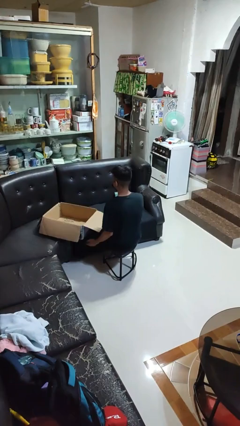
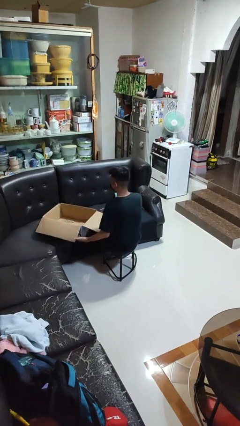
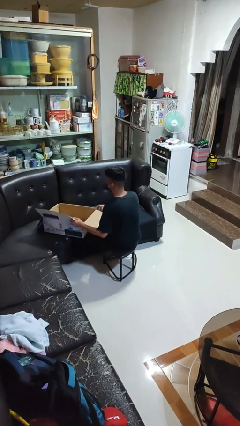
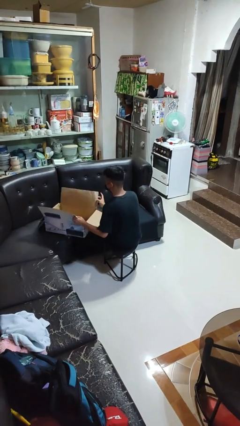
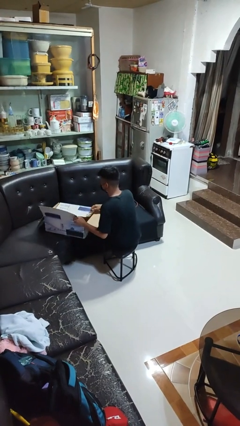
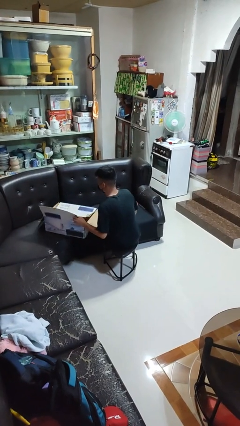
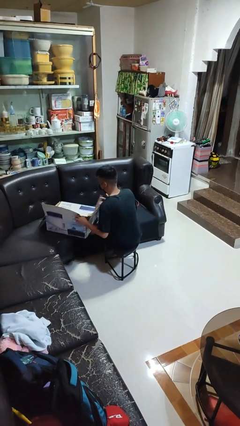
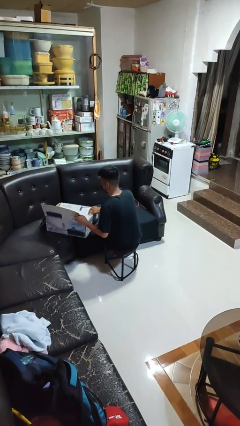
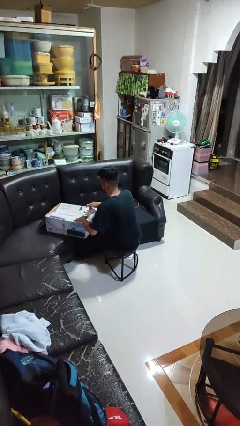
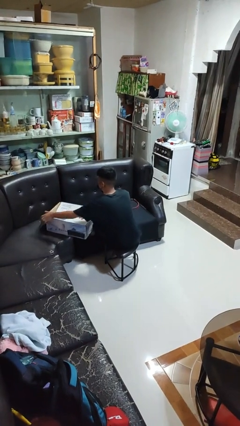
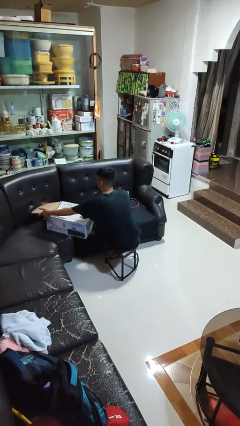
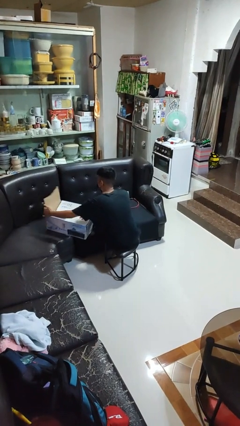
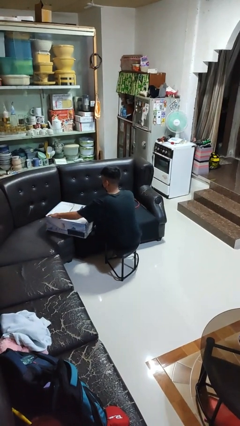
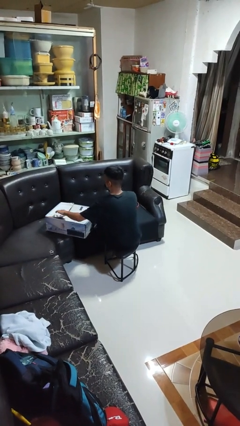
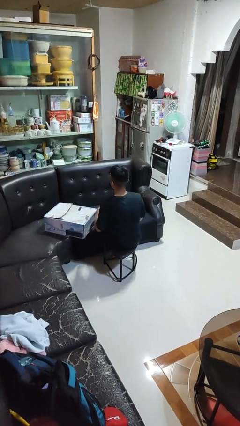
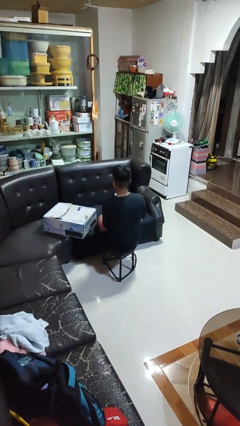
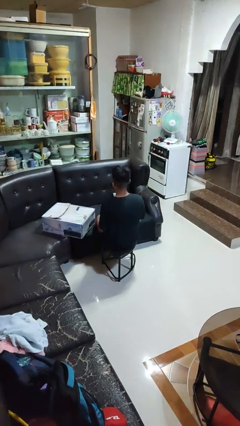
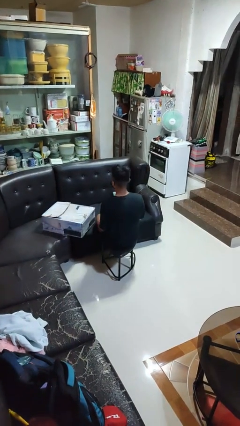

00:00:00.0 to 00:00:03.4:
person closes box

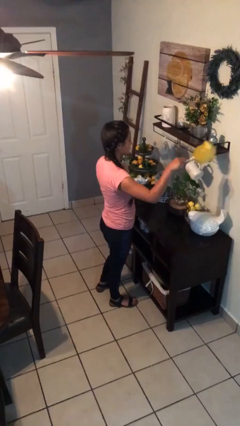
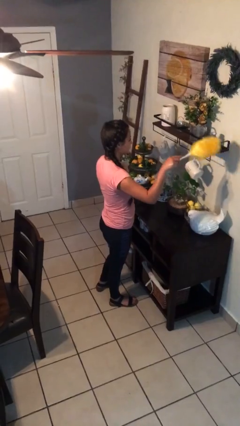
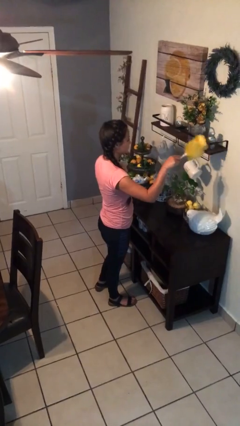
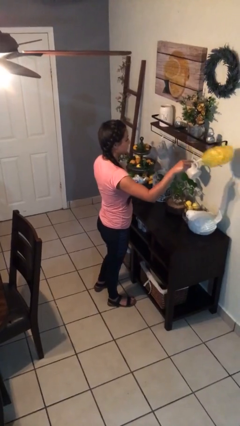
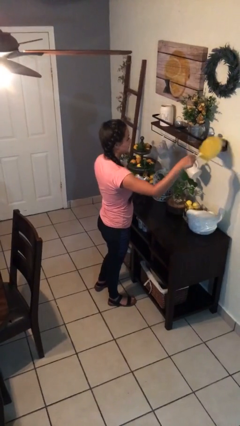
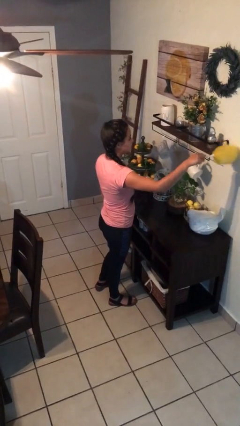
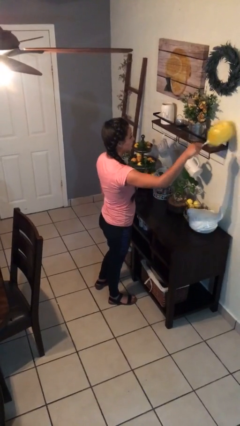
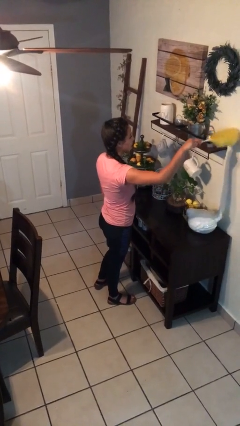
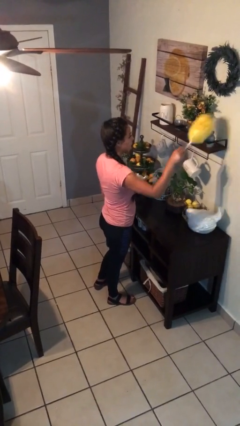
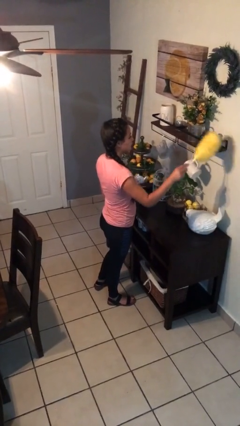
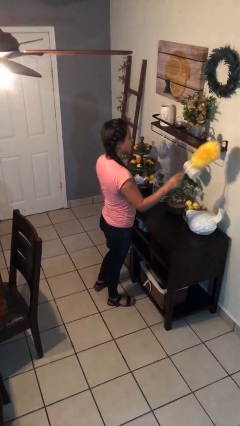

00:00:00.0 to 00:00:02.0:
person dusts furniture

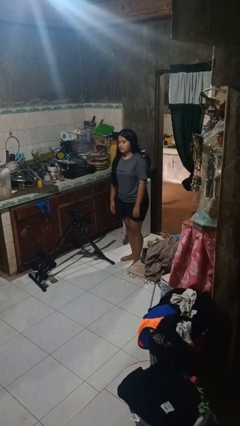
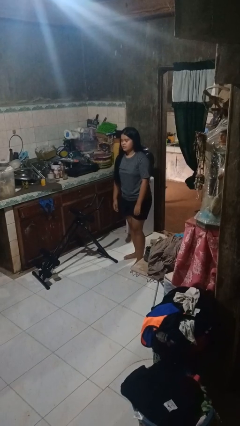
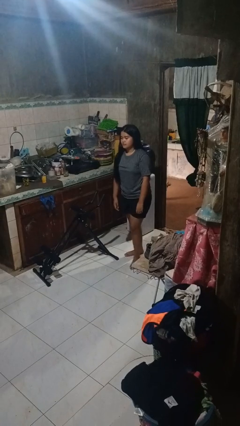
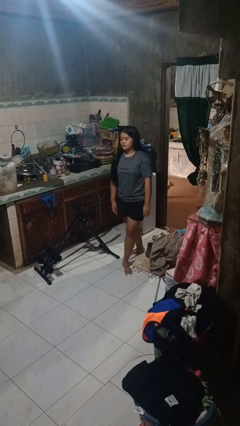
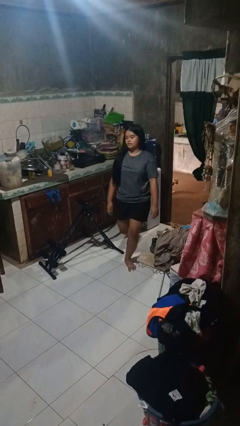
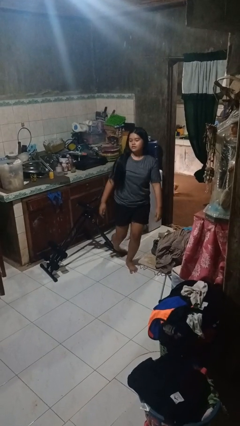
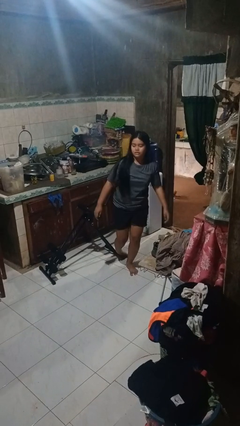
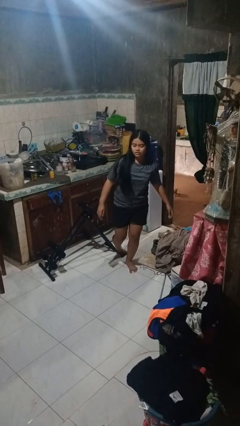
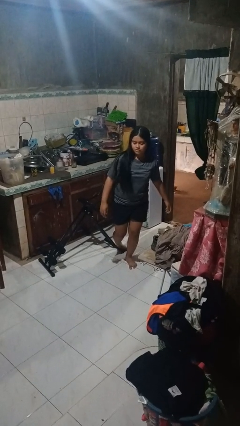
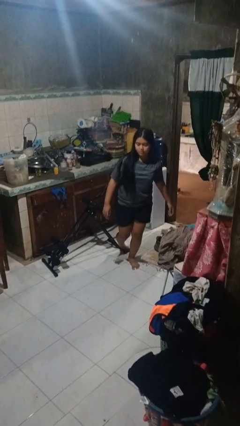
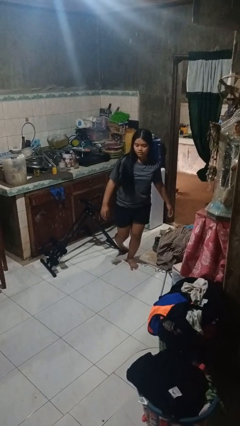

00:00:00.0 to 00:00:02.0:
person trips on object on floor

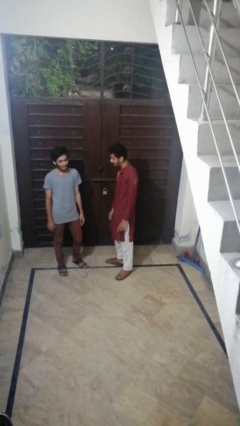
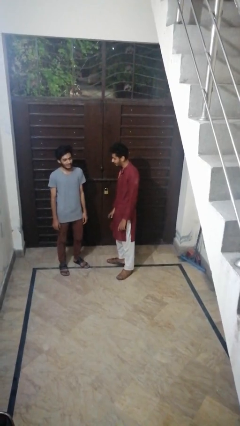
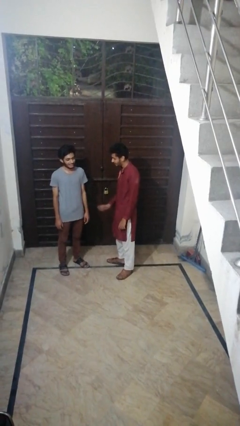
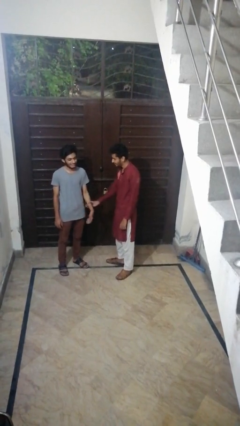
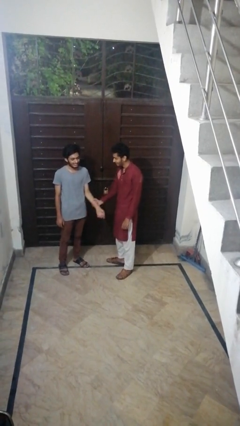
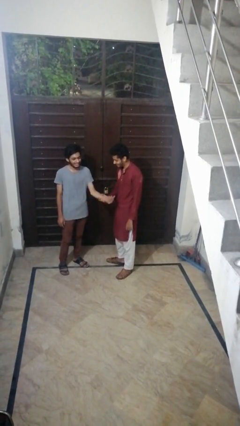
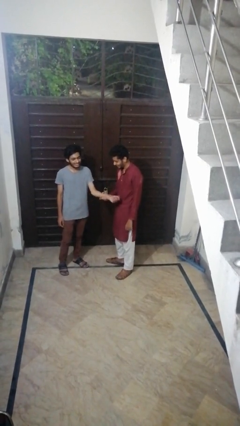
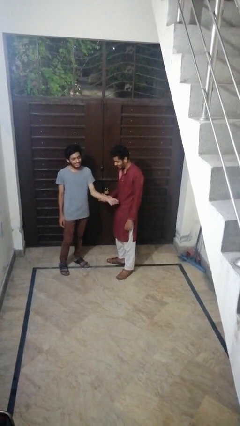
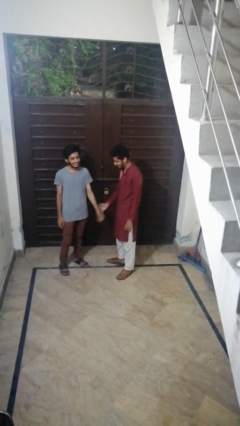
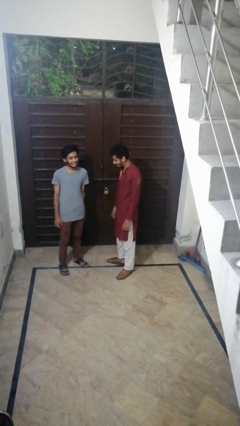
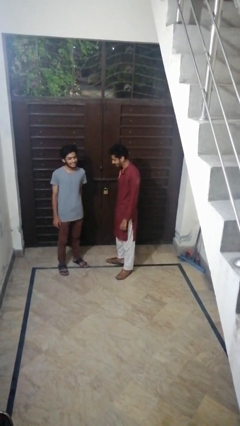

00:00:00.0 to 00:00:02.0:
person grabs person by forearm

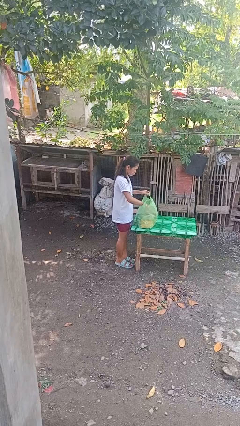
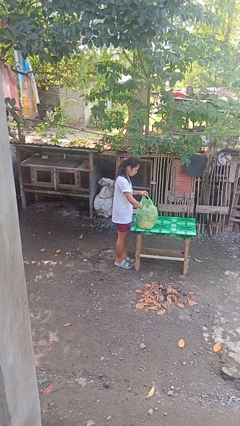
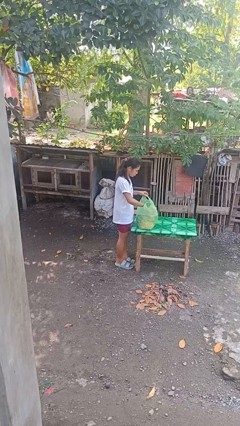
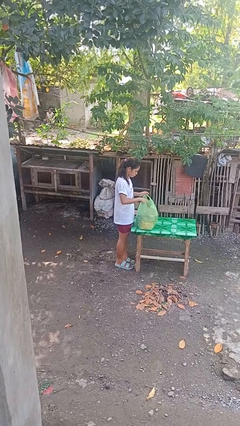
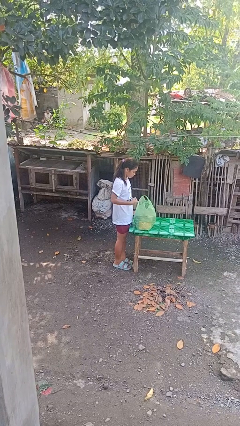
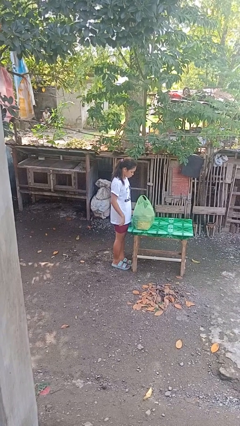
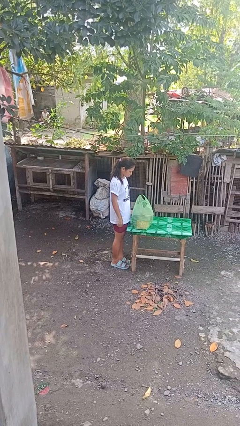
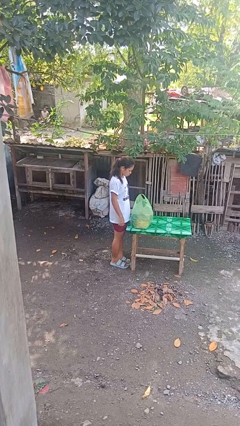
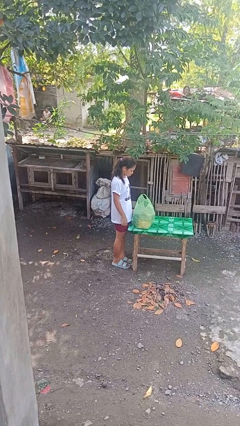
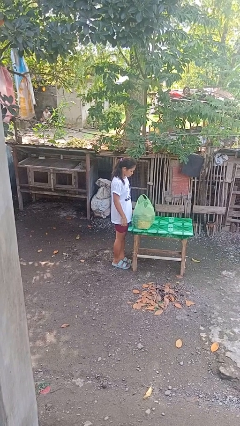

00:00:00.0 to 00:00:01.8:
person puts object into bag

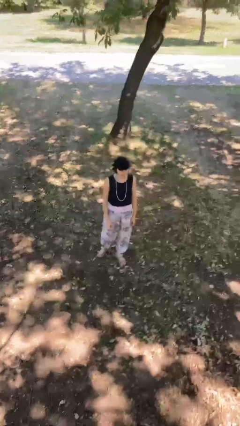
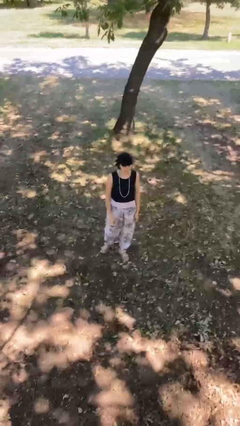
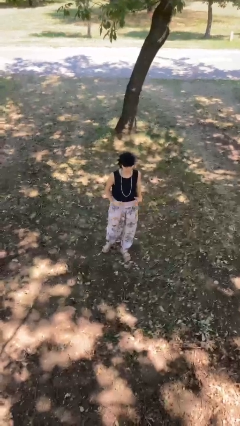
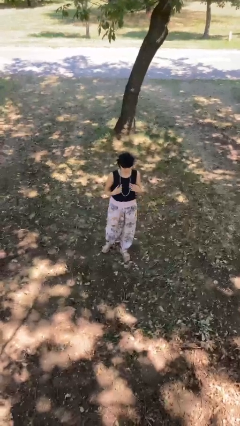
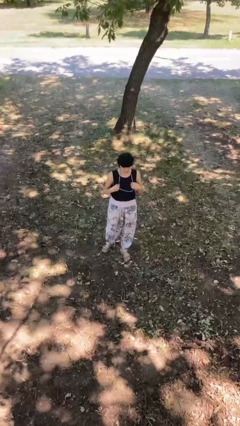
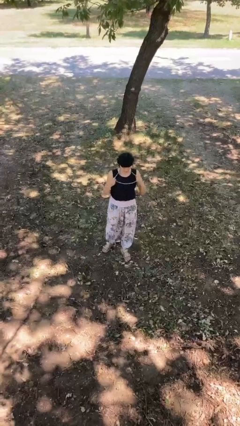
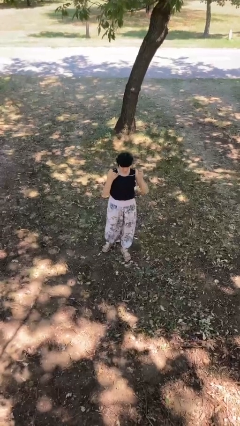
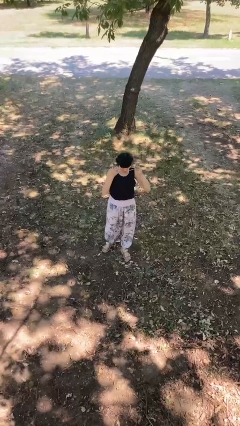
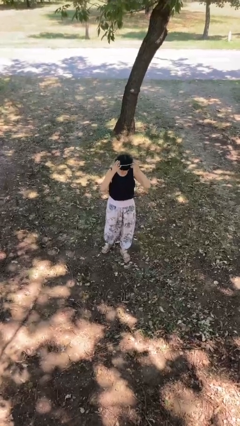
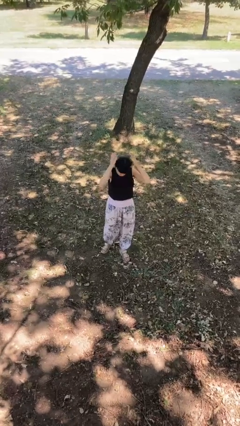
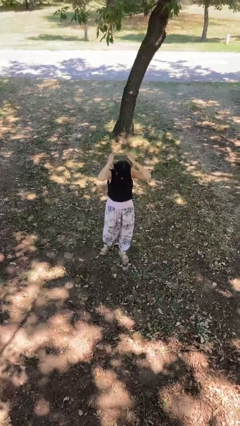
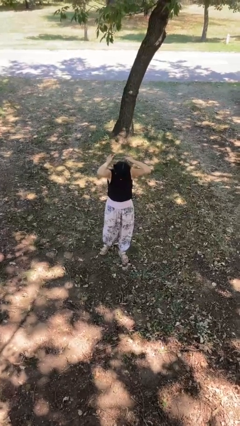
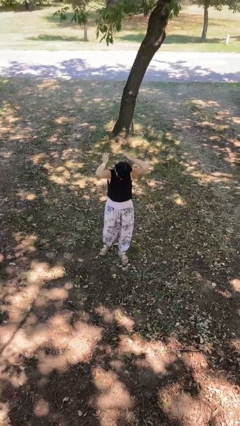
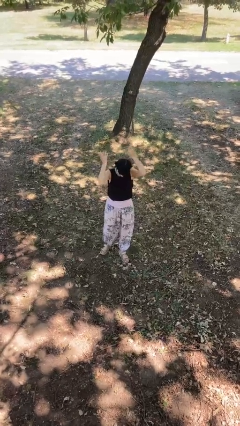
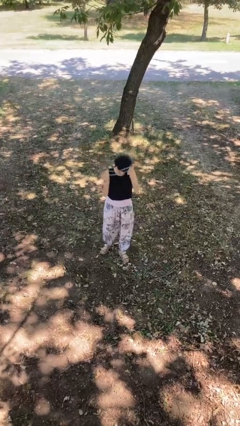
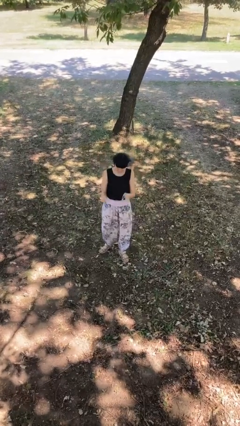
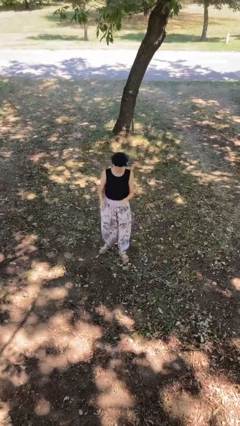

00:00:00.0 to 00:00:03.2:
person takes off necklace

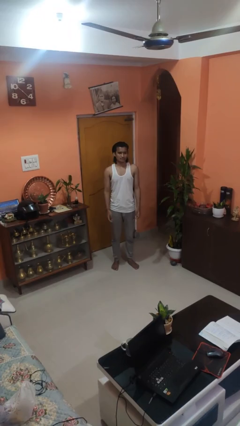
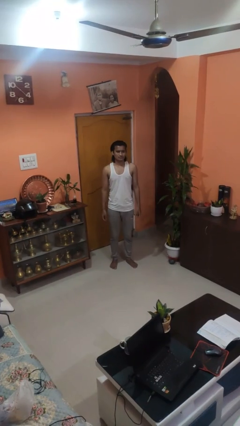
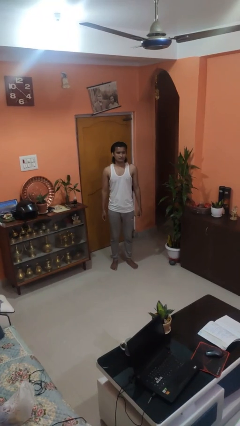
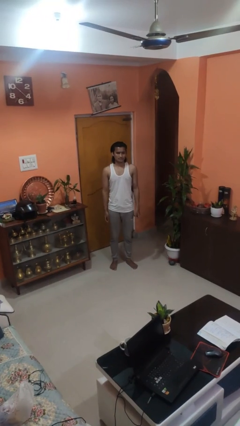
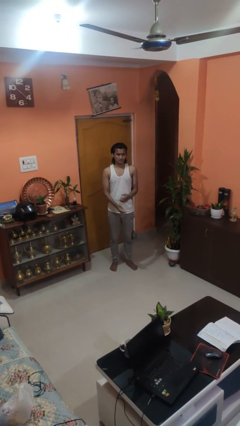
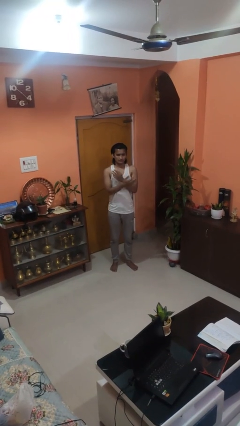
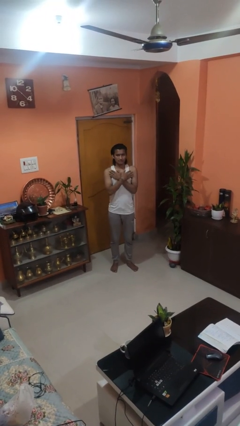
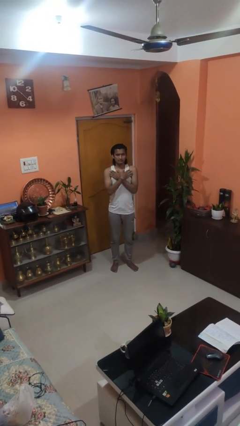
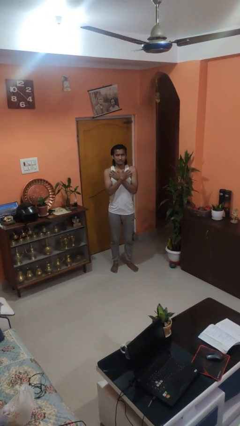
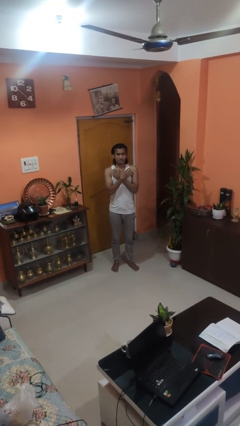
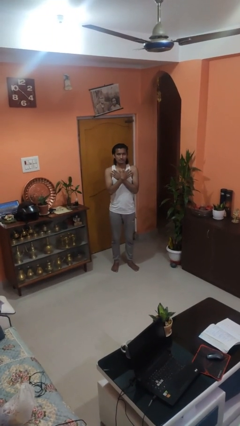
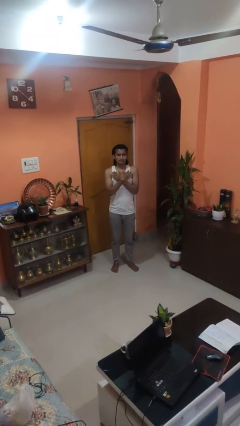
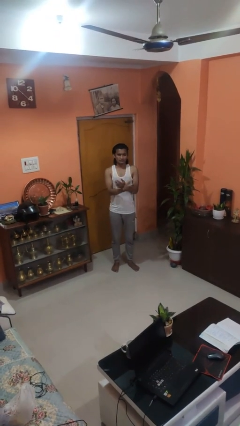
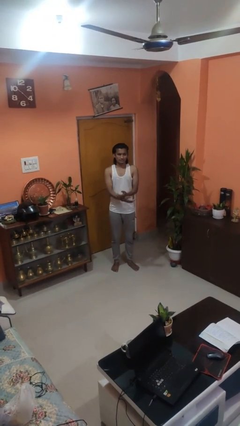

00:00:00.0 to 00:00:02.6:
person drums on chest
